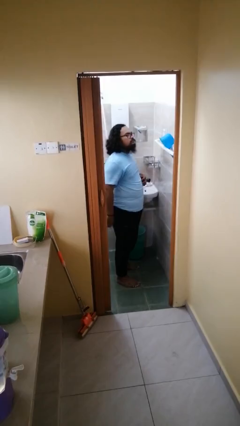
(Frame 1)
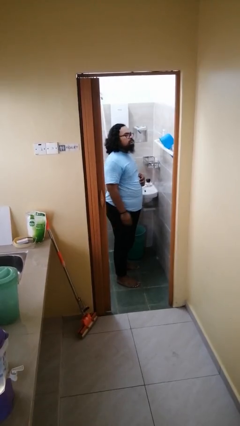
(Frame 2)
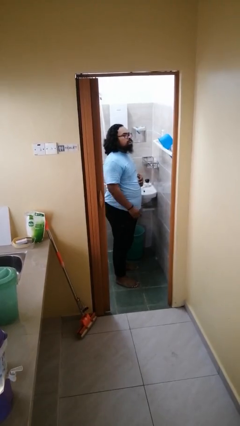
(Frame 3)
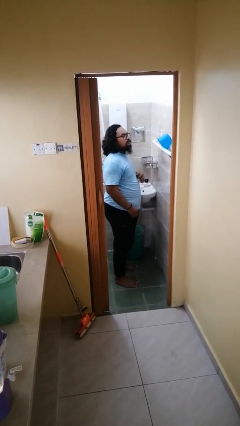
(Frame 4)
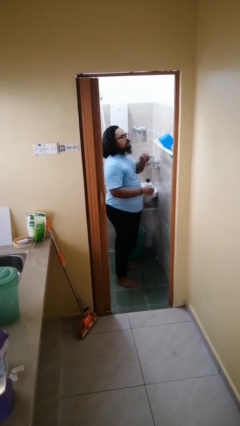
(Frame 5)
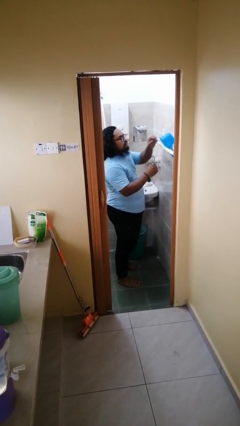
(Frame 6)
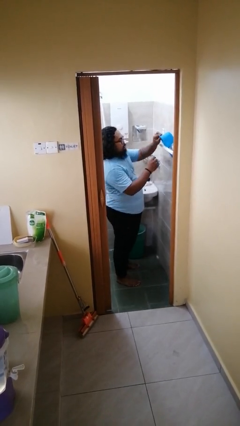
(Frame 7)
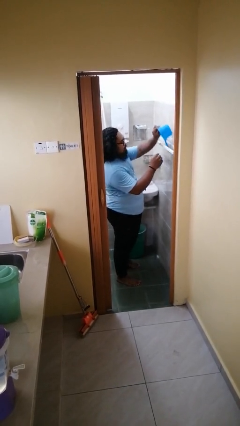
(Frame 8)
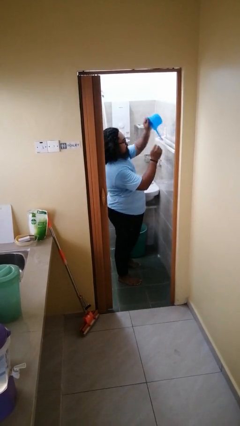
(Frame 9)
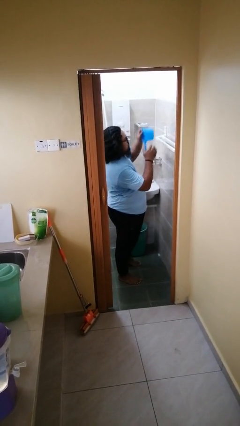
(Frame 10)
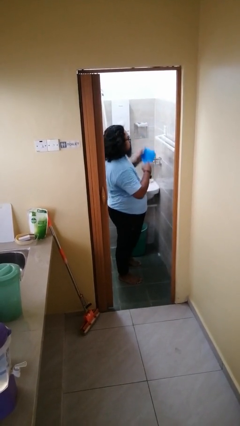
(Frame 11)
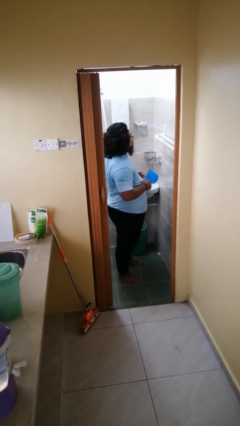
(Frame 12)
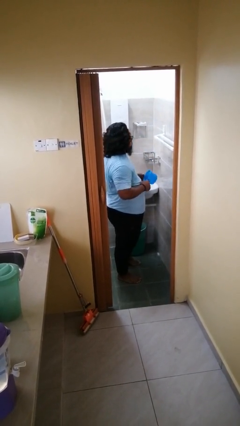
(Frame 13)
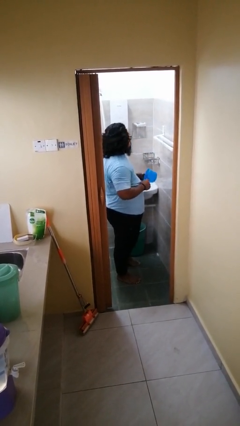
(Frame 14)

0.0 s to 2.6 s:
person picks up object from countertop

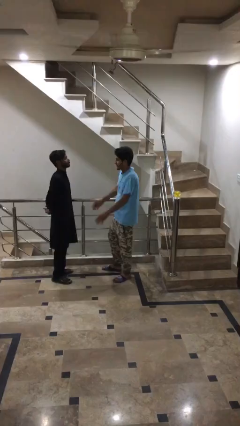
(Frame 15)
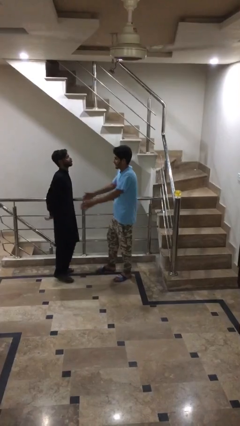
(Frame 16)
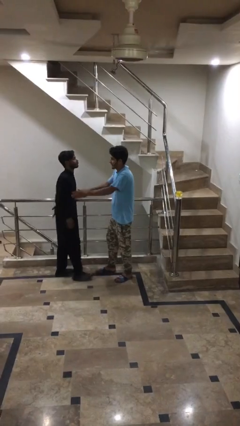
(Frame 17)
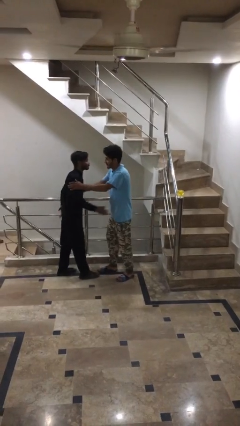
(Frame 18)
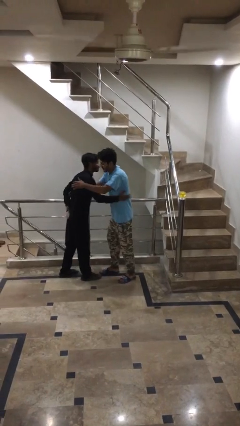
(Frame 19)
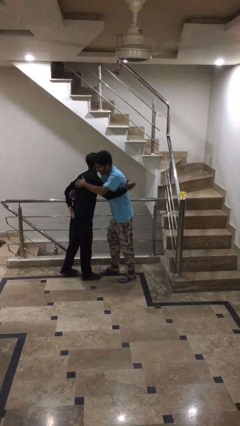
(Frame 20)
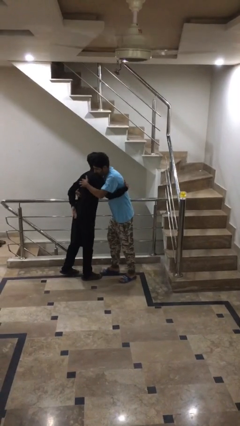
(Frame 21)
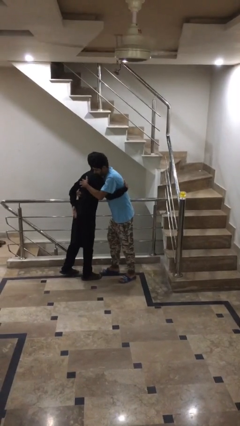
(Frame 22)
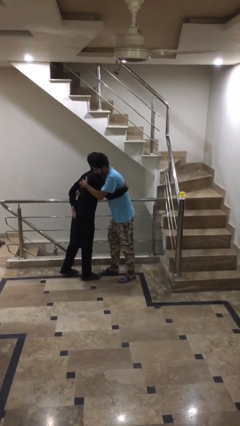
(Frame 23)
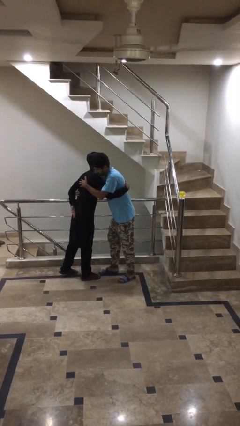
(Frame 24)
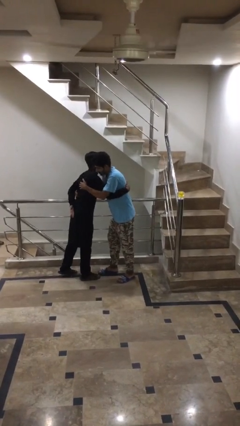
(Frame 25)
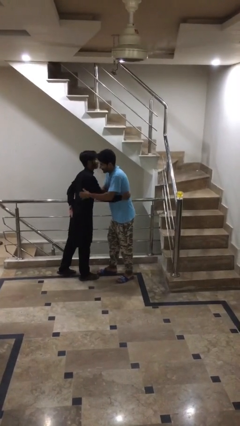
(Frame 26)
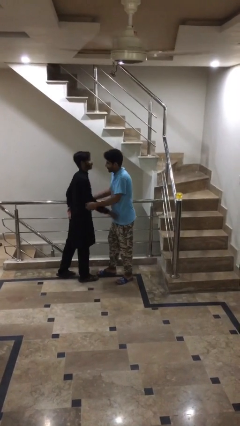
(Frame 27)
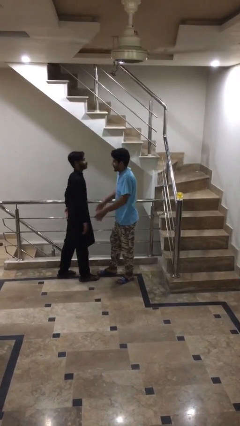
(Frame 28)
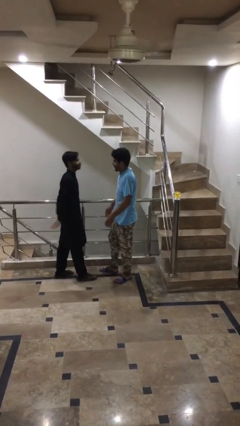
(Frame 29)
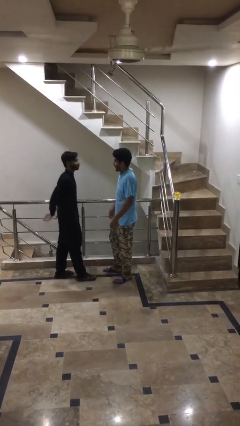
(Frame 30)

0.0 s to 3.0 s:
person embraces person

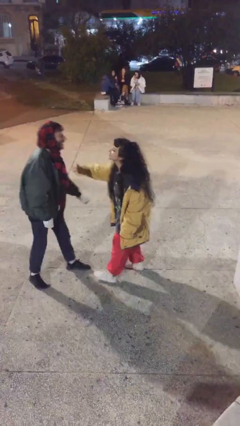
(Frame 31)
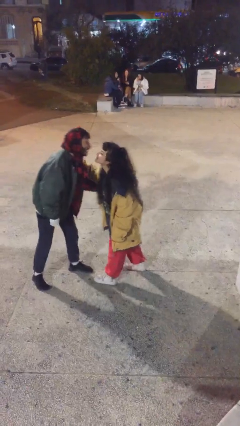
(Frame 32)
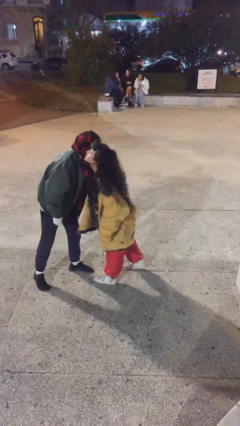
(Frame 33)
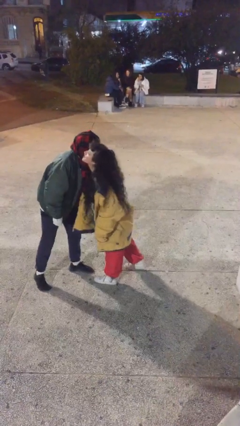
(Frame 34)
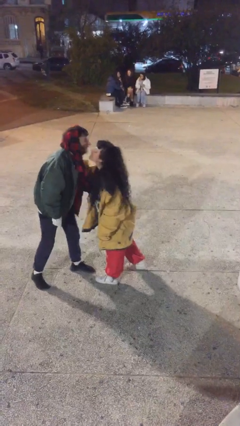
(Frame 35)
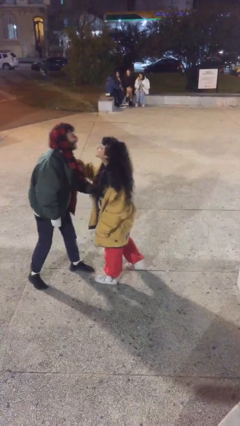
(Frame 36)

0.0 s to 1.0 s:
person kisses cheek of person

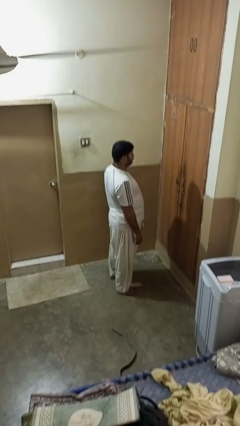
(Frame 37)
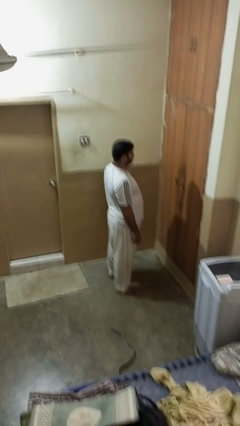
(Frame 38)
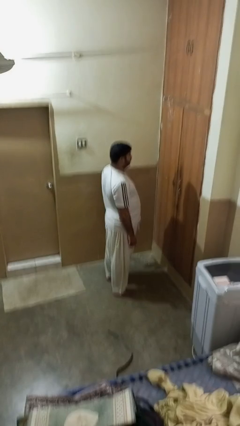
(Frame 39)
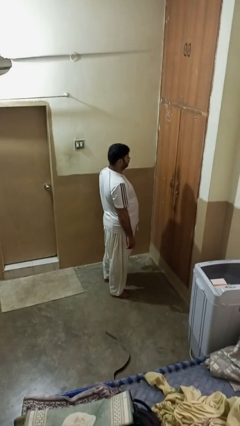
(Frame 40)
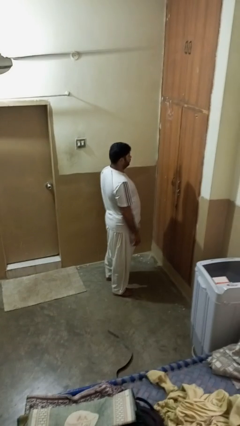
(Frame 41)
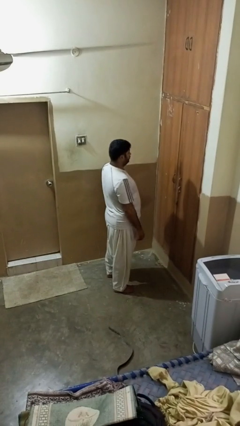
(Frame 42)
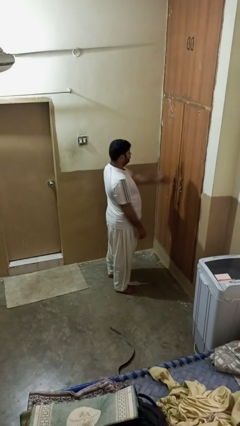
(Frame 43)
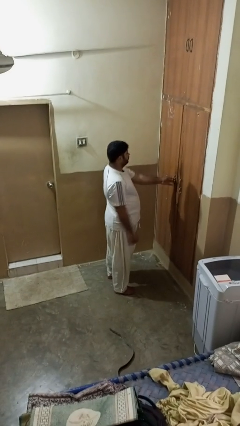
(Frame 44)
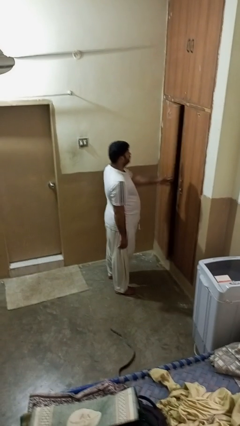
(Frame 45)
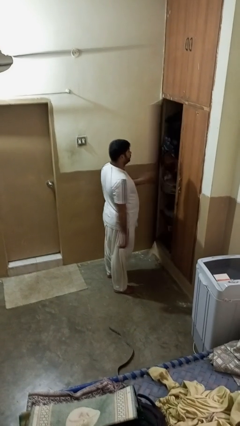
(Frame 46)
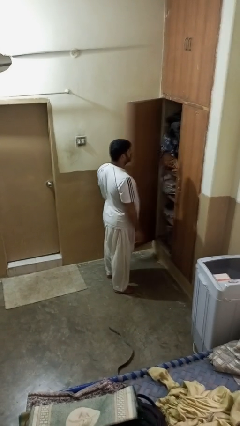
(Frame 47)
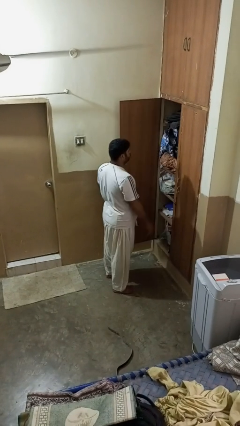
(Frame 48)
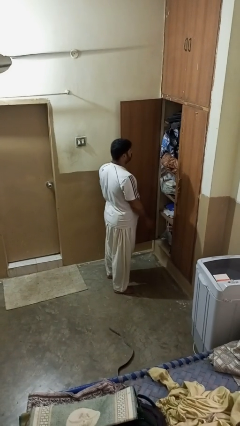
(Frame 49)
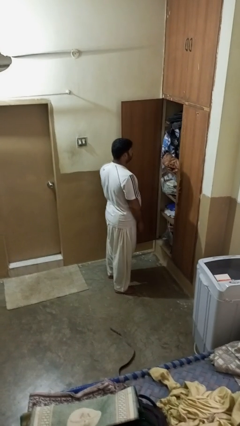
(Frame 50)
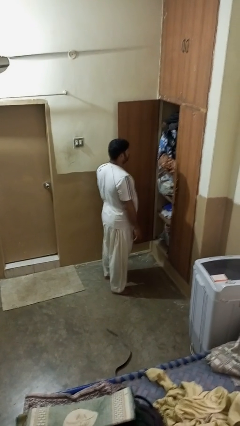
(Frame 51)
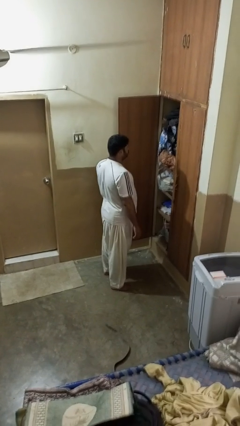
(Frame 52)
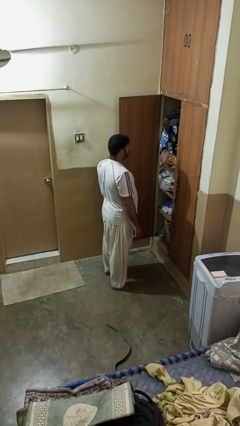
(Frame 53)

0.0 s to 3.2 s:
person opens closet door

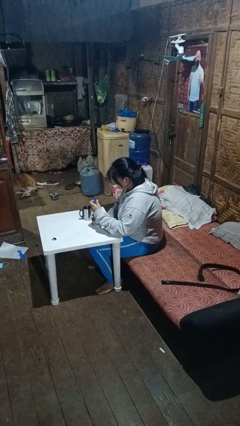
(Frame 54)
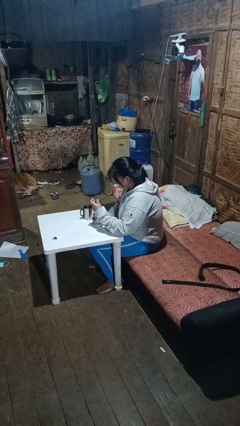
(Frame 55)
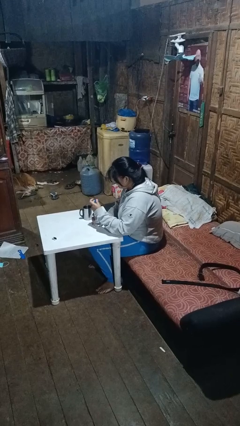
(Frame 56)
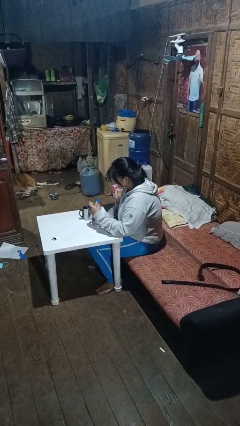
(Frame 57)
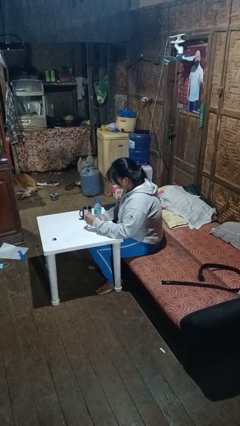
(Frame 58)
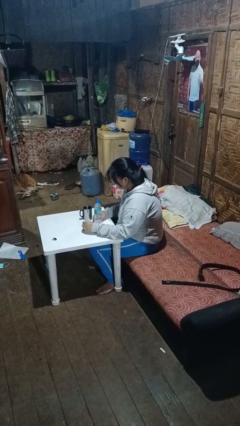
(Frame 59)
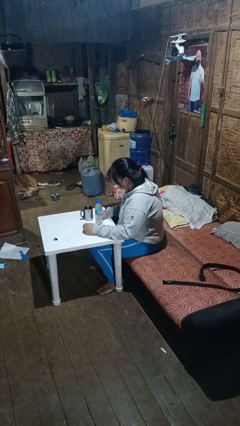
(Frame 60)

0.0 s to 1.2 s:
person screws lid to bottle

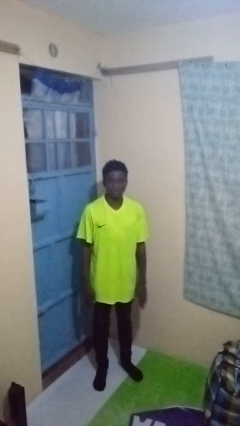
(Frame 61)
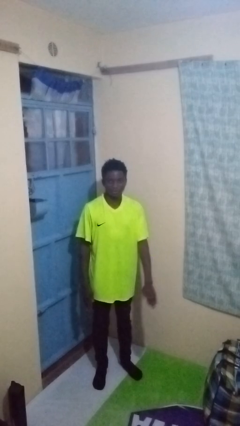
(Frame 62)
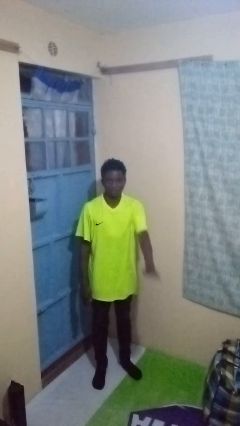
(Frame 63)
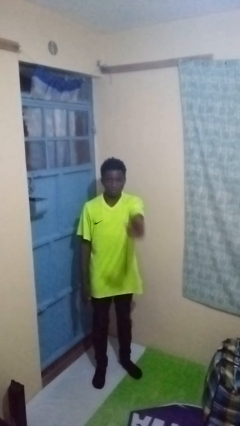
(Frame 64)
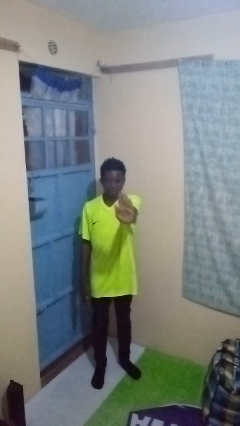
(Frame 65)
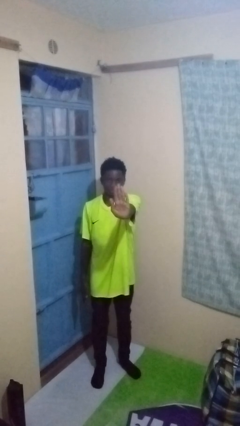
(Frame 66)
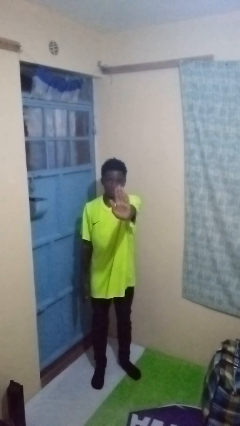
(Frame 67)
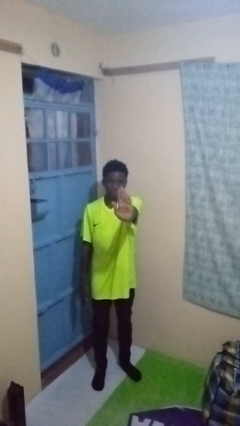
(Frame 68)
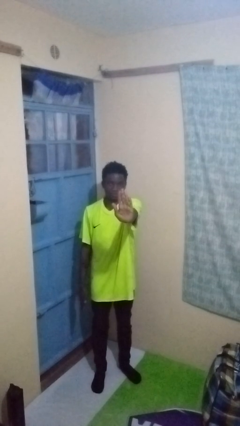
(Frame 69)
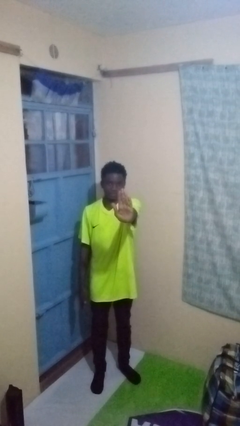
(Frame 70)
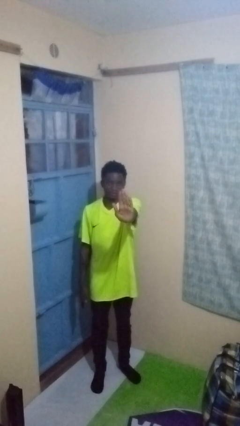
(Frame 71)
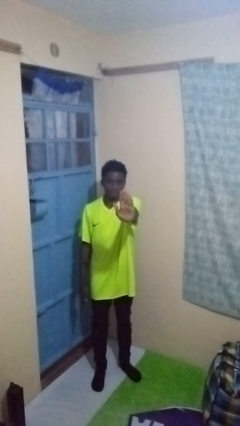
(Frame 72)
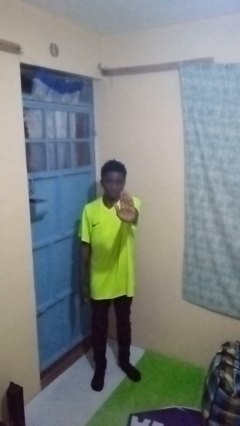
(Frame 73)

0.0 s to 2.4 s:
person gestures stop

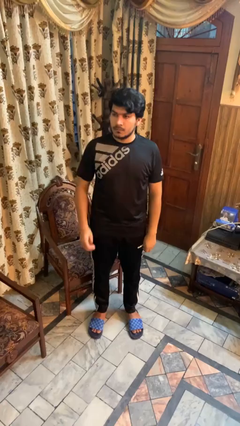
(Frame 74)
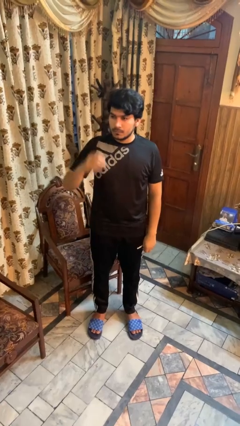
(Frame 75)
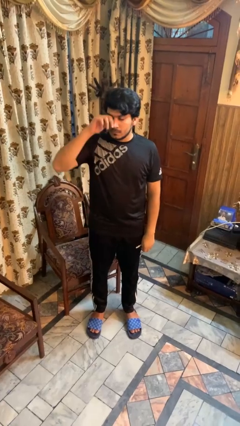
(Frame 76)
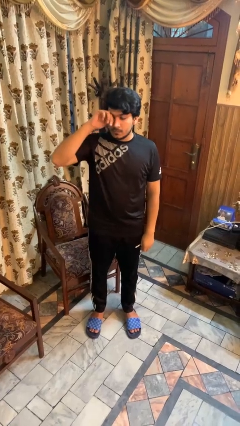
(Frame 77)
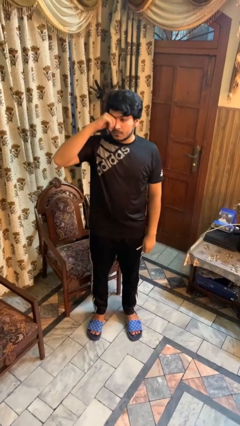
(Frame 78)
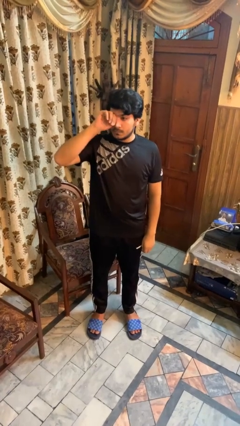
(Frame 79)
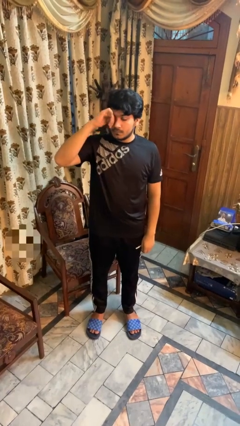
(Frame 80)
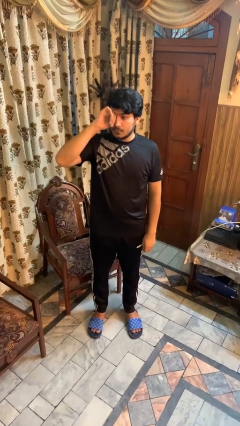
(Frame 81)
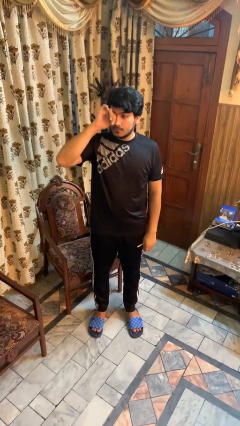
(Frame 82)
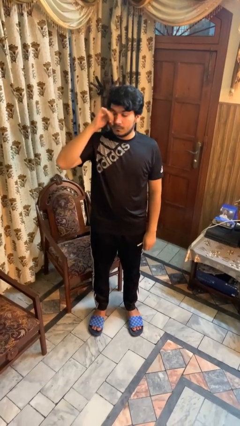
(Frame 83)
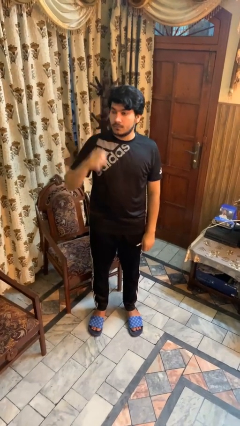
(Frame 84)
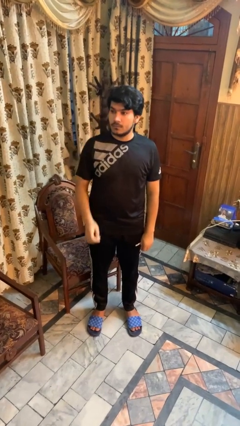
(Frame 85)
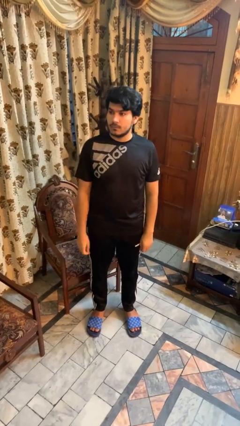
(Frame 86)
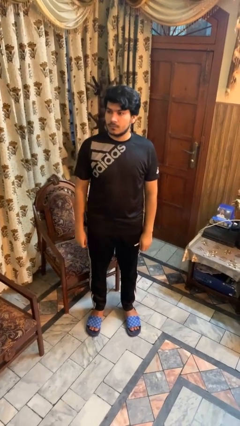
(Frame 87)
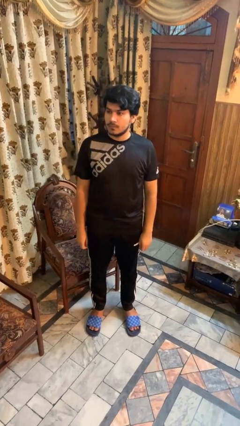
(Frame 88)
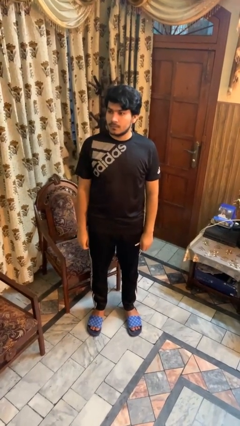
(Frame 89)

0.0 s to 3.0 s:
person rubs eyes

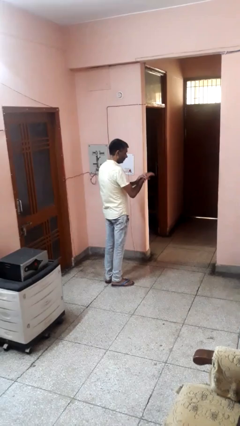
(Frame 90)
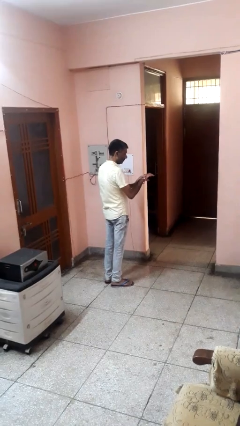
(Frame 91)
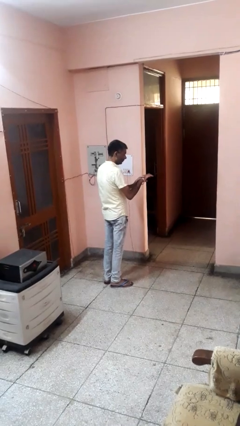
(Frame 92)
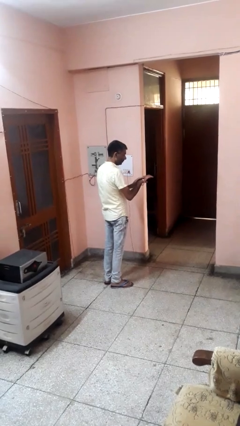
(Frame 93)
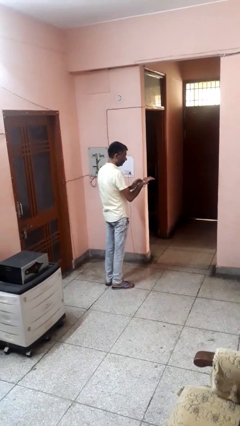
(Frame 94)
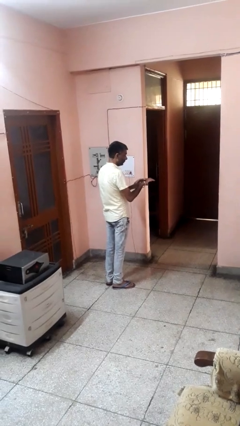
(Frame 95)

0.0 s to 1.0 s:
person swats bug
